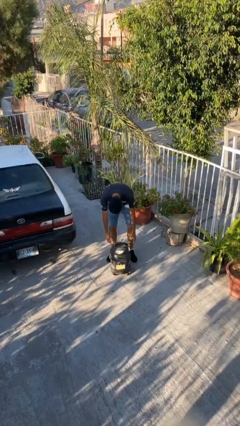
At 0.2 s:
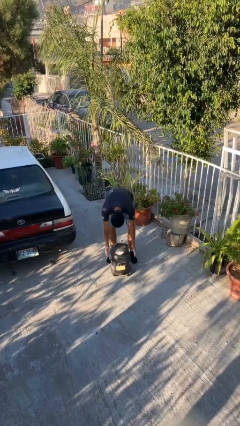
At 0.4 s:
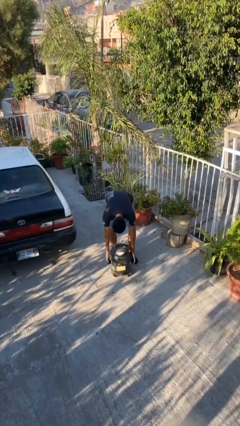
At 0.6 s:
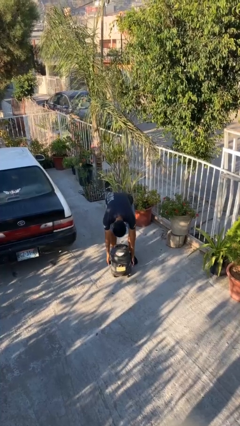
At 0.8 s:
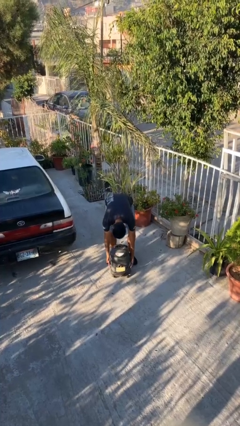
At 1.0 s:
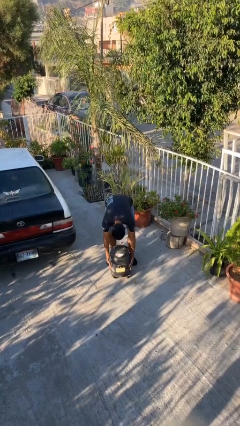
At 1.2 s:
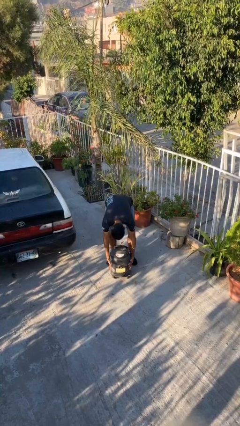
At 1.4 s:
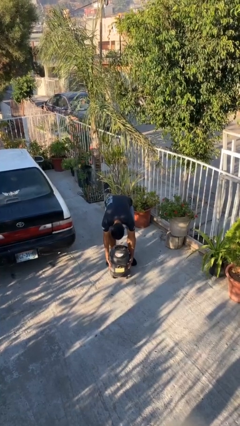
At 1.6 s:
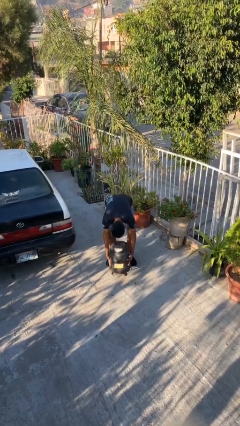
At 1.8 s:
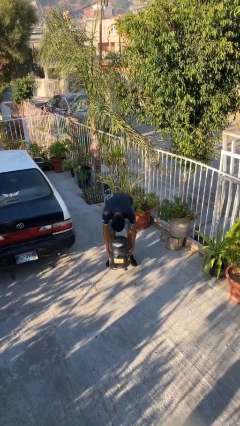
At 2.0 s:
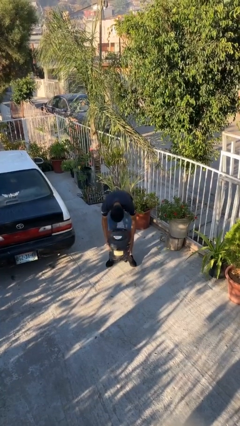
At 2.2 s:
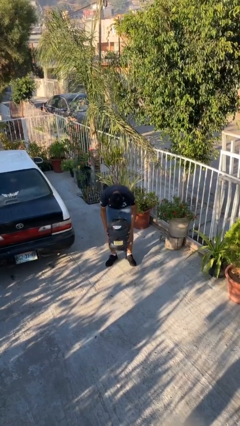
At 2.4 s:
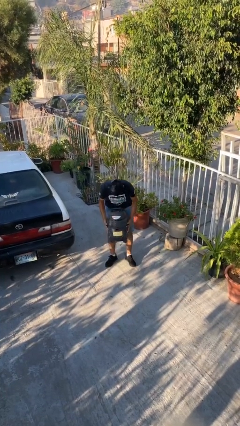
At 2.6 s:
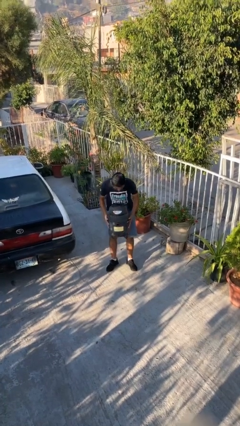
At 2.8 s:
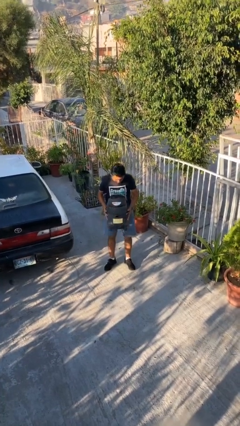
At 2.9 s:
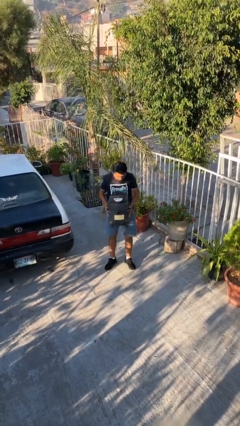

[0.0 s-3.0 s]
person picks up object from floor

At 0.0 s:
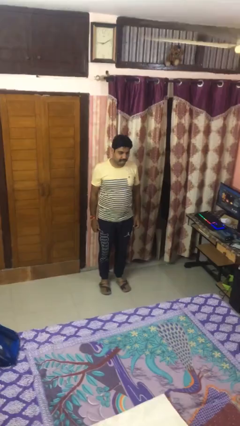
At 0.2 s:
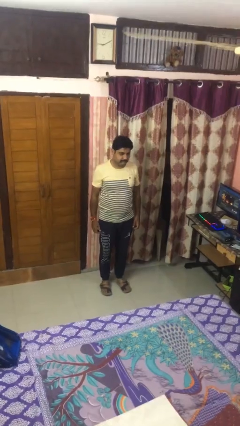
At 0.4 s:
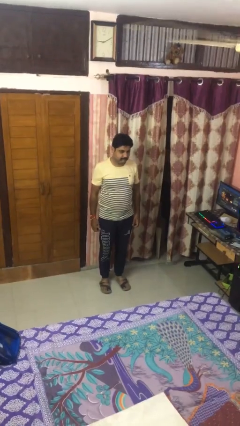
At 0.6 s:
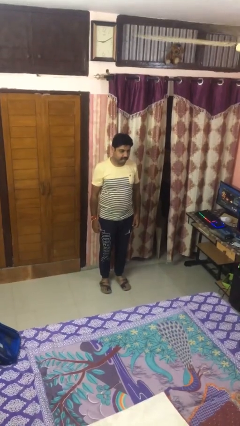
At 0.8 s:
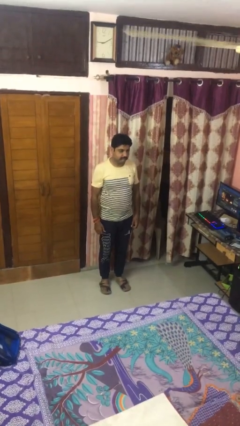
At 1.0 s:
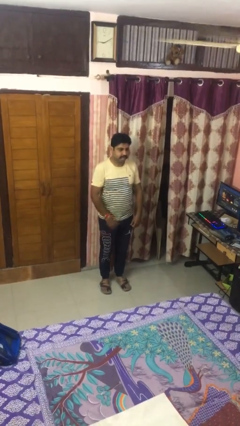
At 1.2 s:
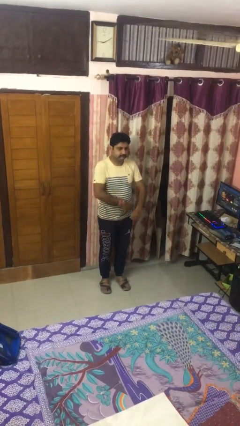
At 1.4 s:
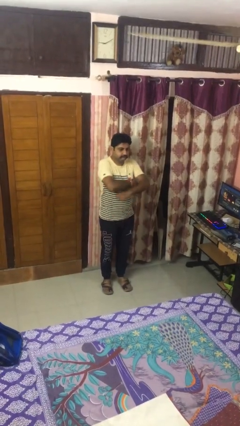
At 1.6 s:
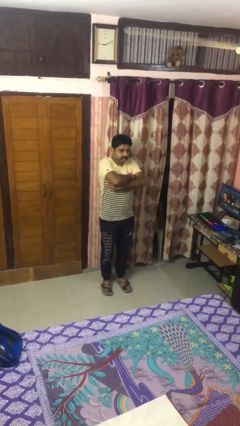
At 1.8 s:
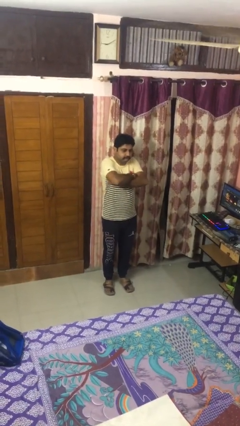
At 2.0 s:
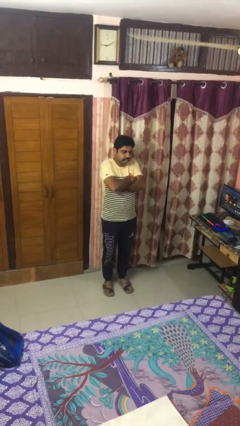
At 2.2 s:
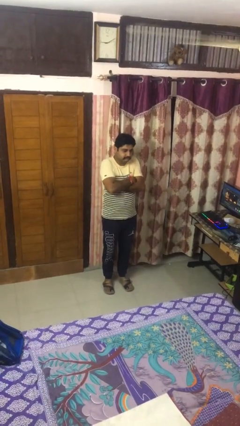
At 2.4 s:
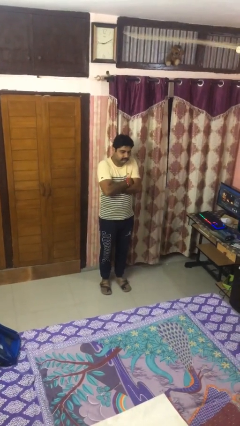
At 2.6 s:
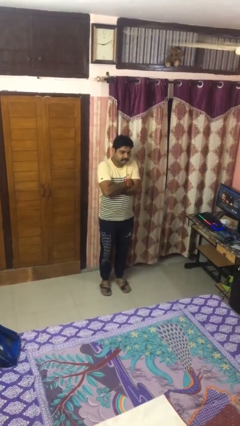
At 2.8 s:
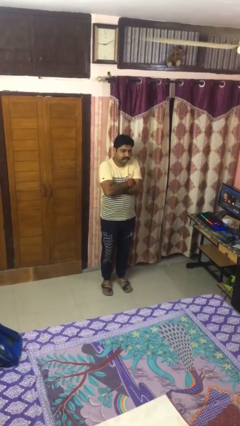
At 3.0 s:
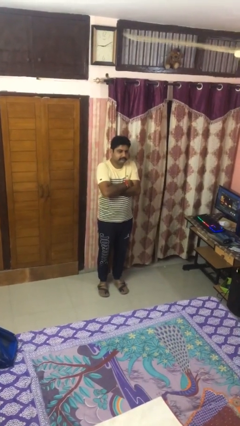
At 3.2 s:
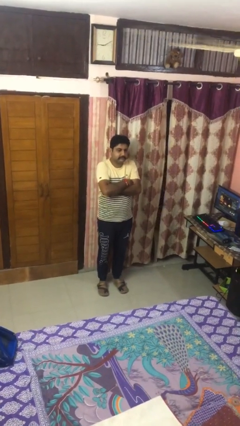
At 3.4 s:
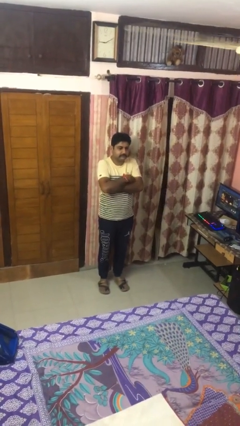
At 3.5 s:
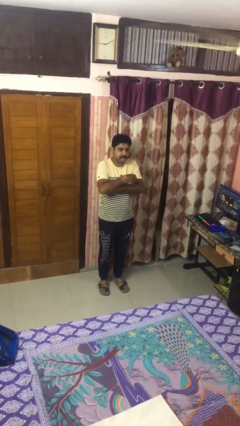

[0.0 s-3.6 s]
person crosses arms

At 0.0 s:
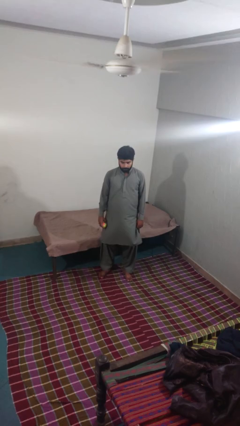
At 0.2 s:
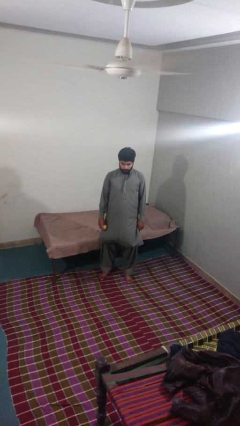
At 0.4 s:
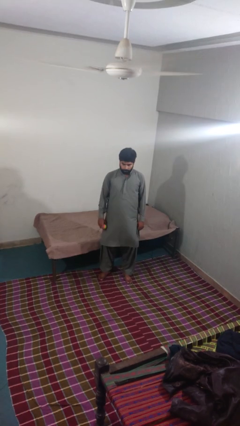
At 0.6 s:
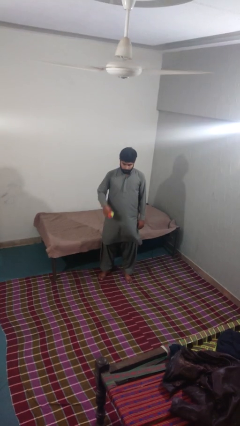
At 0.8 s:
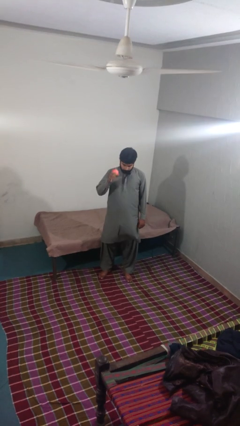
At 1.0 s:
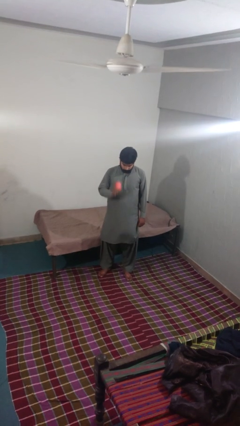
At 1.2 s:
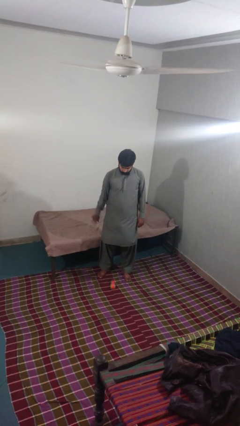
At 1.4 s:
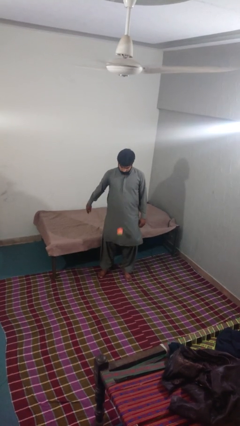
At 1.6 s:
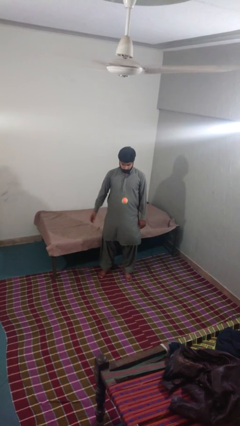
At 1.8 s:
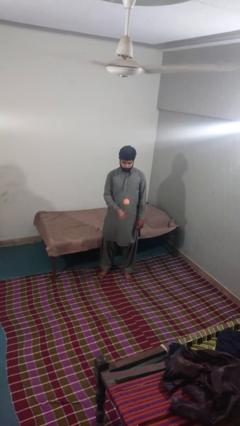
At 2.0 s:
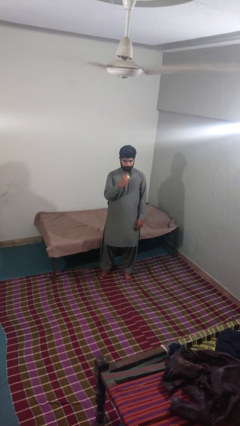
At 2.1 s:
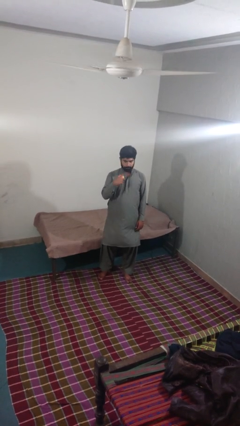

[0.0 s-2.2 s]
person bounces ball on floor

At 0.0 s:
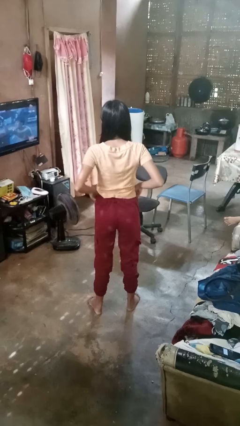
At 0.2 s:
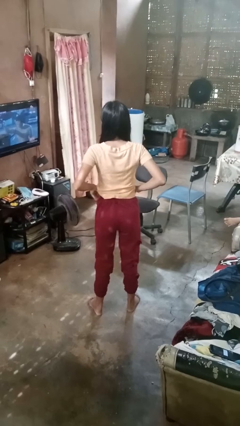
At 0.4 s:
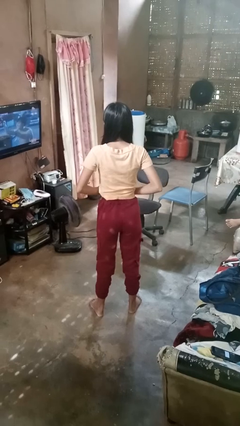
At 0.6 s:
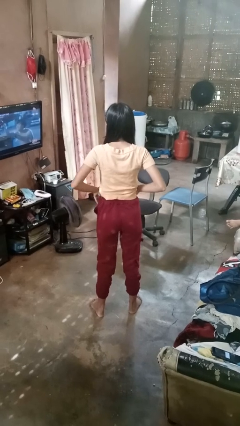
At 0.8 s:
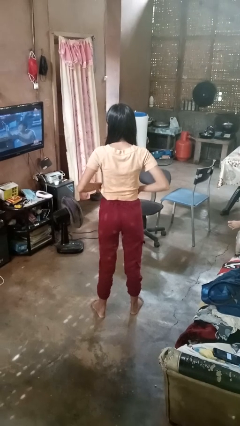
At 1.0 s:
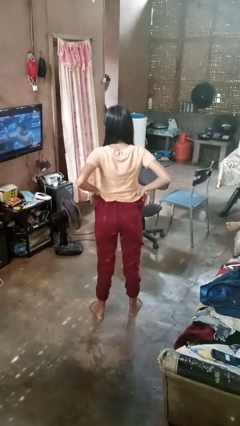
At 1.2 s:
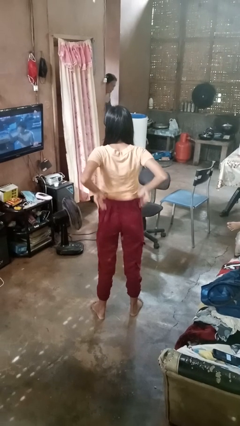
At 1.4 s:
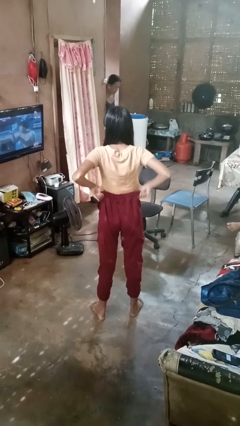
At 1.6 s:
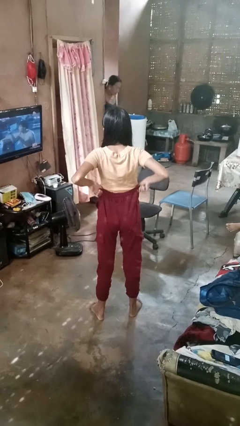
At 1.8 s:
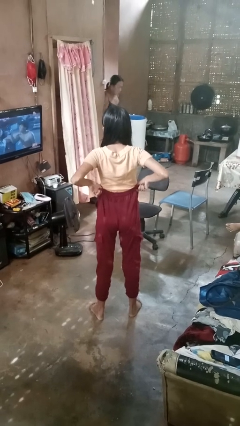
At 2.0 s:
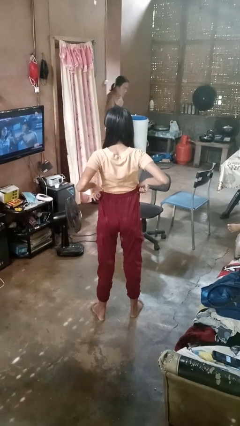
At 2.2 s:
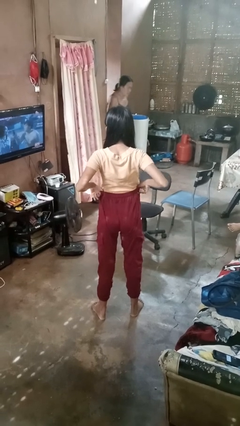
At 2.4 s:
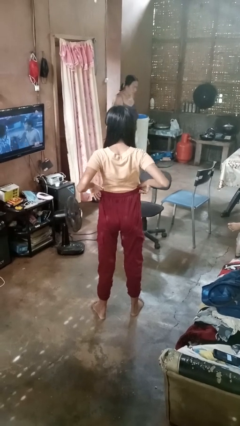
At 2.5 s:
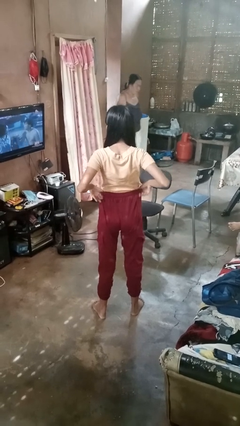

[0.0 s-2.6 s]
person hikes up pants

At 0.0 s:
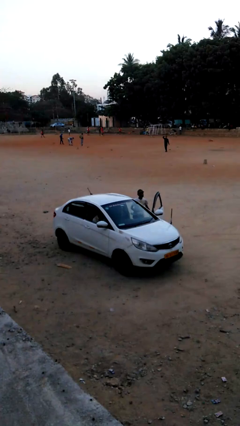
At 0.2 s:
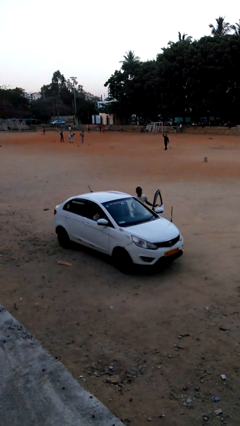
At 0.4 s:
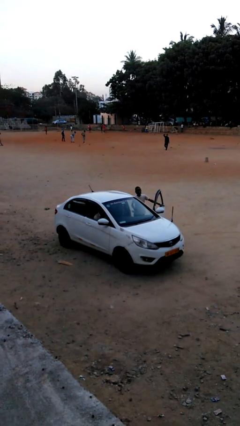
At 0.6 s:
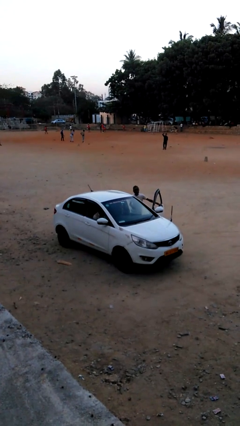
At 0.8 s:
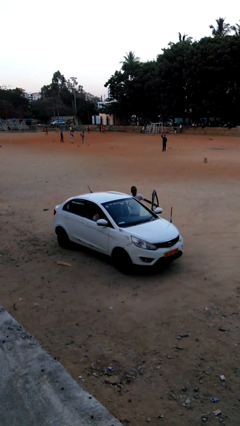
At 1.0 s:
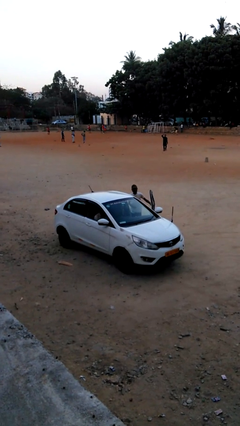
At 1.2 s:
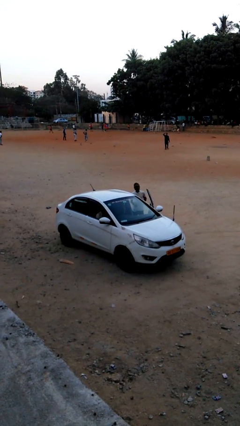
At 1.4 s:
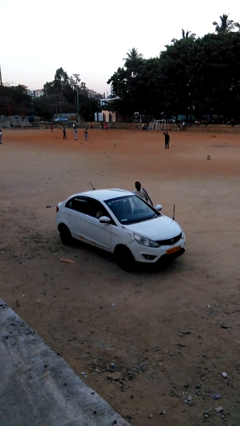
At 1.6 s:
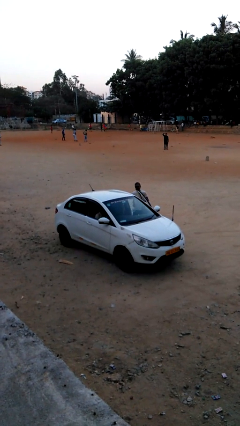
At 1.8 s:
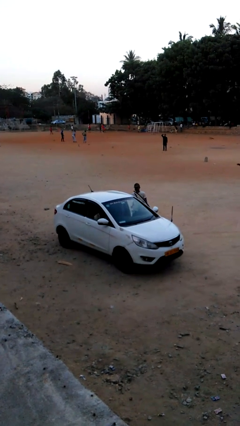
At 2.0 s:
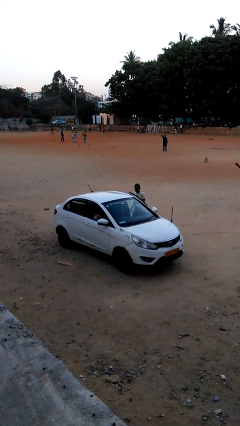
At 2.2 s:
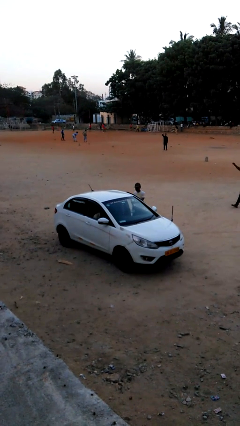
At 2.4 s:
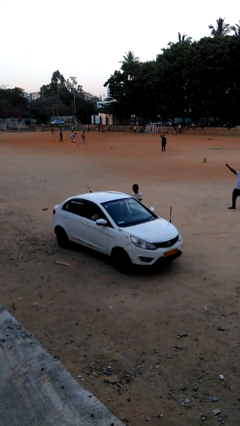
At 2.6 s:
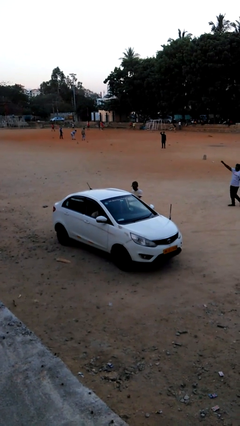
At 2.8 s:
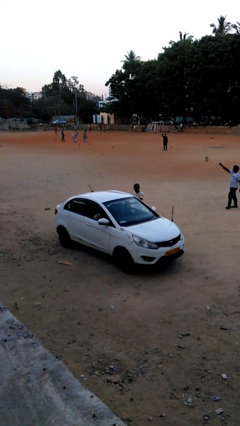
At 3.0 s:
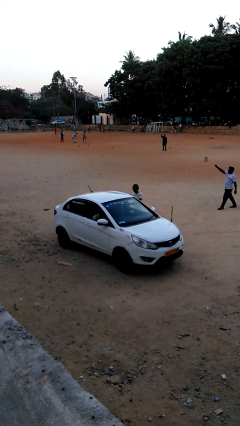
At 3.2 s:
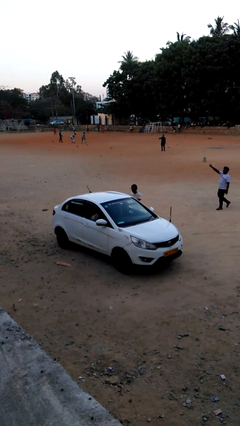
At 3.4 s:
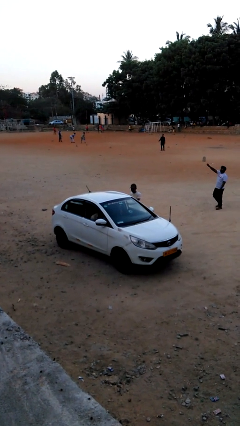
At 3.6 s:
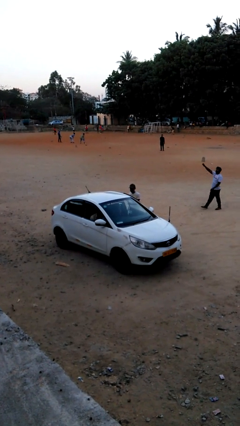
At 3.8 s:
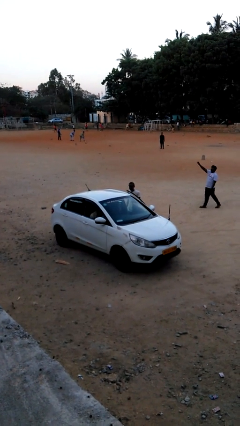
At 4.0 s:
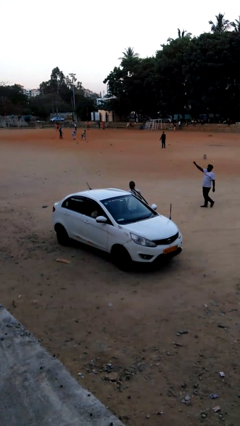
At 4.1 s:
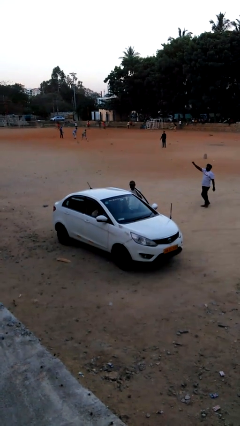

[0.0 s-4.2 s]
car drops off person

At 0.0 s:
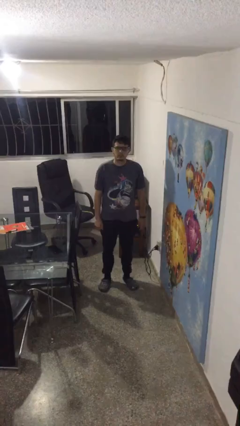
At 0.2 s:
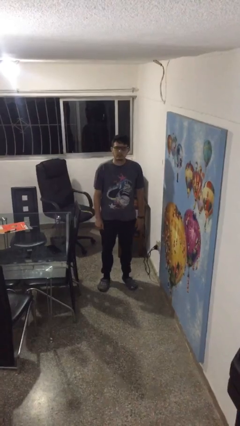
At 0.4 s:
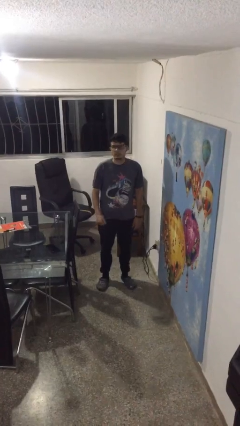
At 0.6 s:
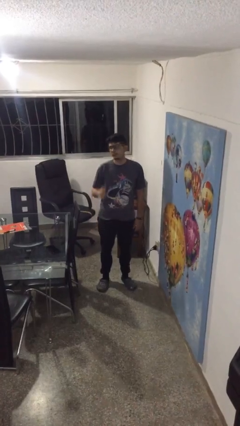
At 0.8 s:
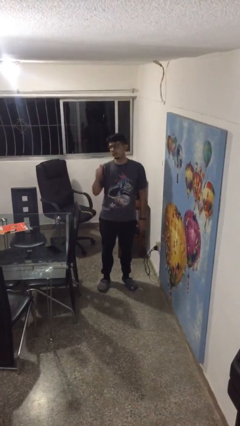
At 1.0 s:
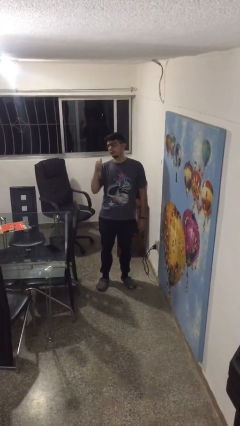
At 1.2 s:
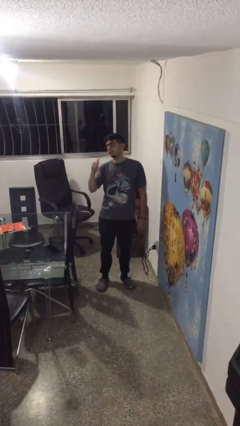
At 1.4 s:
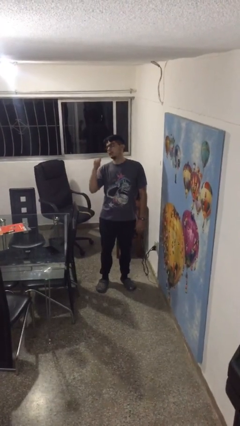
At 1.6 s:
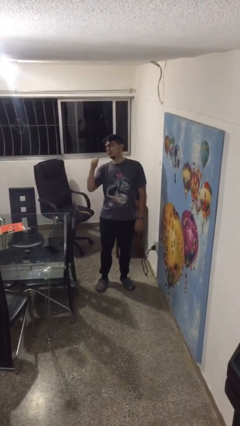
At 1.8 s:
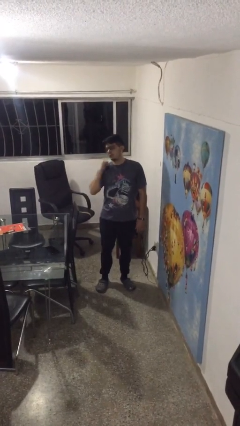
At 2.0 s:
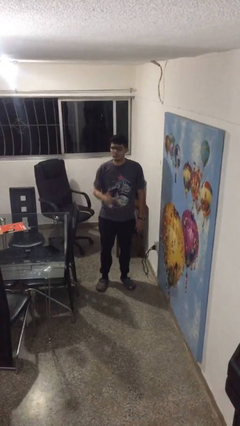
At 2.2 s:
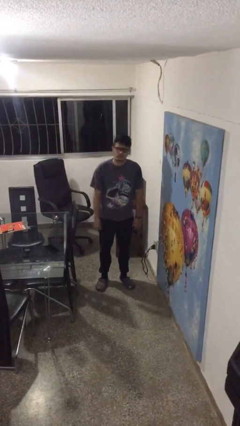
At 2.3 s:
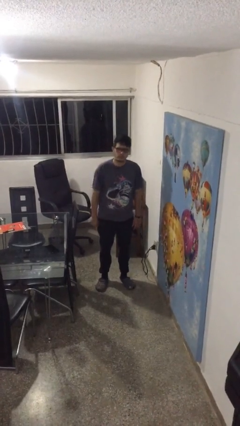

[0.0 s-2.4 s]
person gestures behind me
